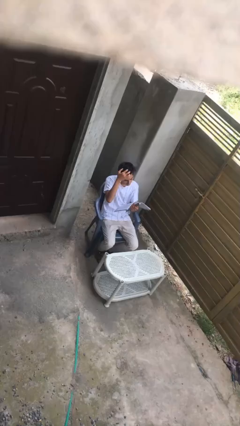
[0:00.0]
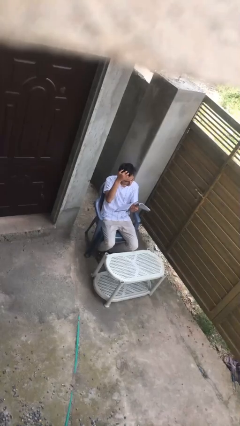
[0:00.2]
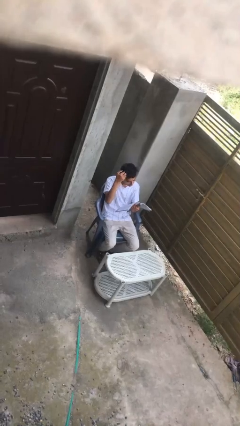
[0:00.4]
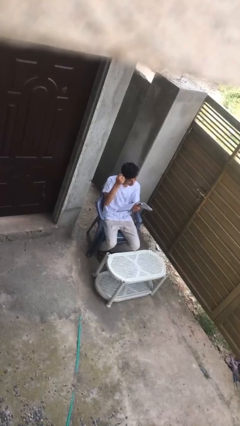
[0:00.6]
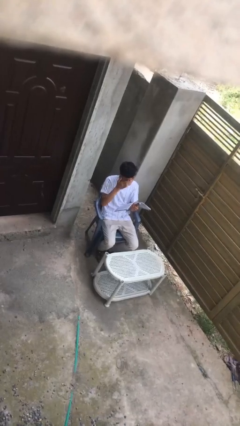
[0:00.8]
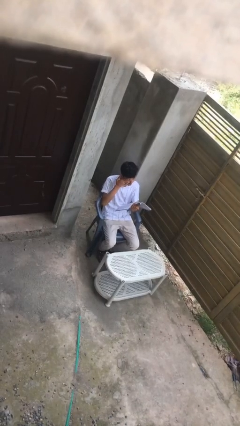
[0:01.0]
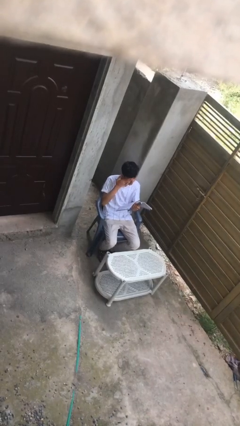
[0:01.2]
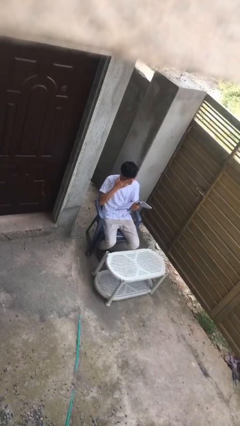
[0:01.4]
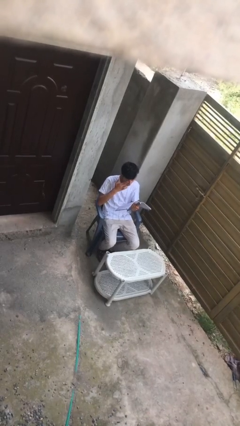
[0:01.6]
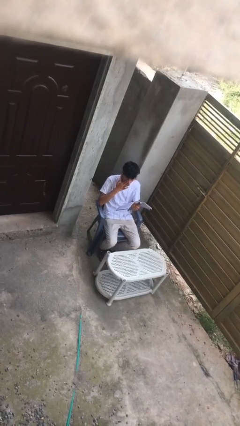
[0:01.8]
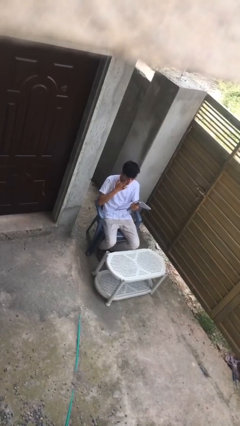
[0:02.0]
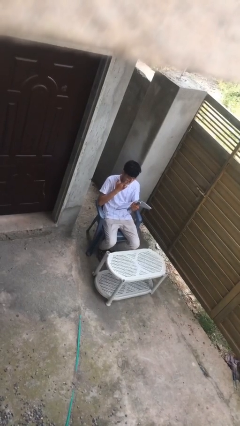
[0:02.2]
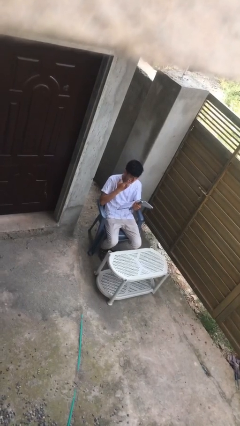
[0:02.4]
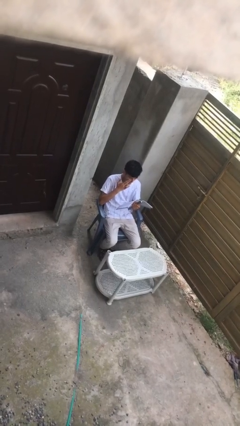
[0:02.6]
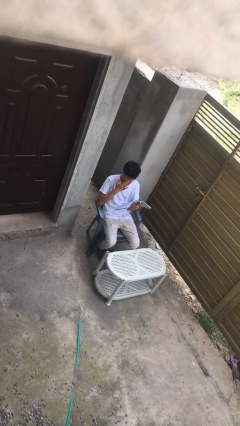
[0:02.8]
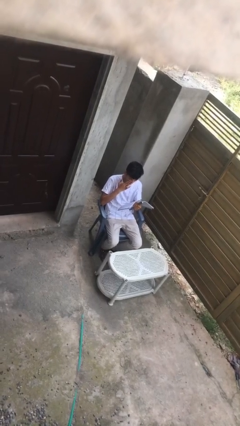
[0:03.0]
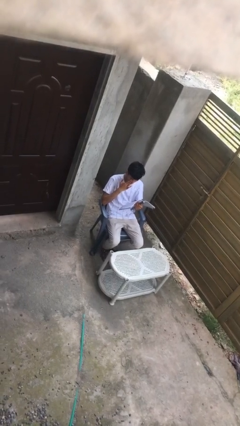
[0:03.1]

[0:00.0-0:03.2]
person reads document

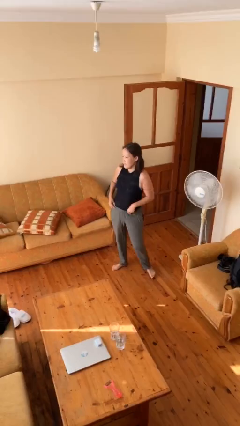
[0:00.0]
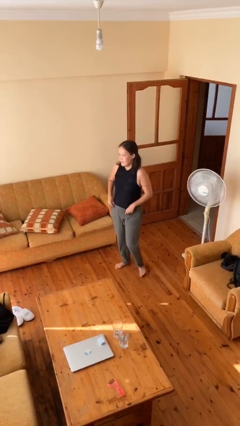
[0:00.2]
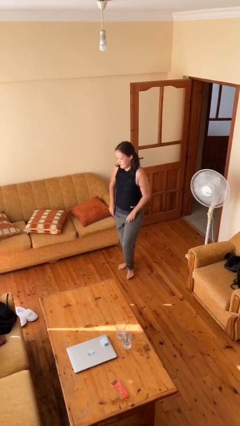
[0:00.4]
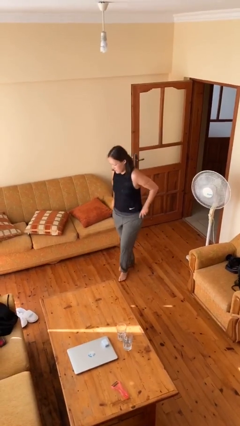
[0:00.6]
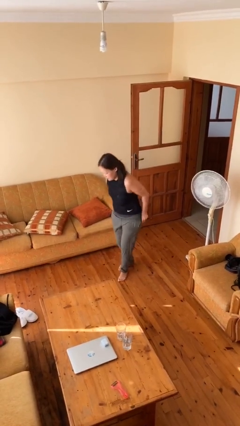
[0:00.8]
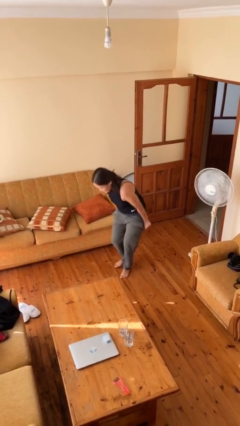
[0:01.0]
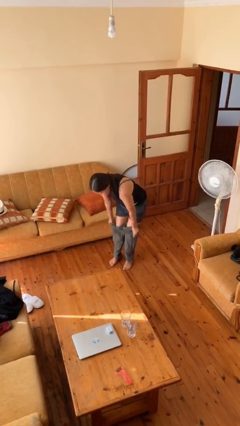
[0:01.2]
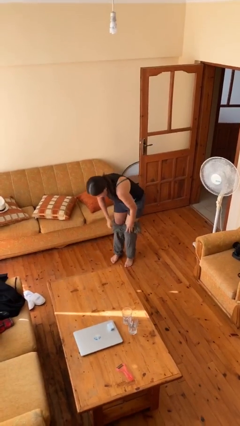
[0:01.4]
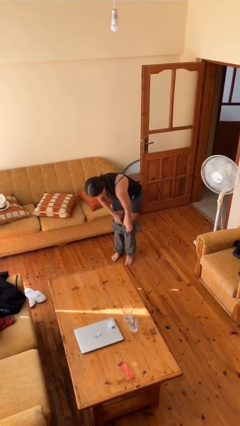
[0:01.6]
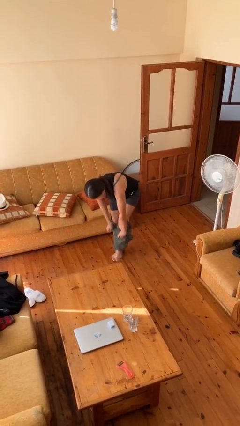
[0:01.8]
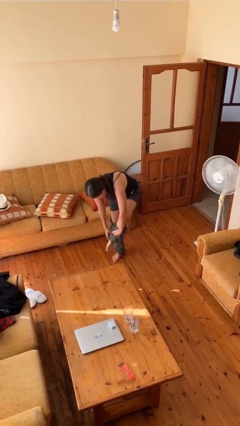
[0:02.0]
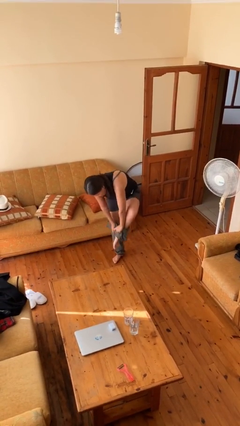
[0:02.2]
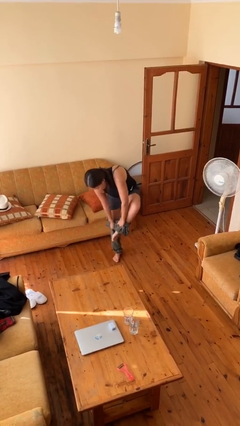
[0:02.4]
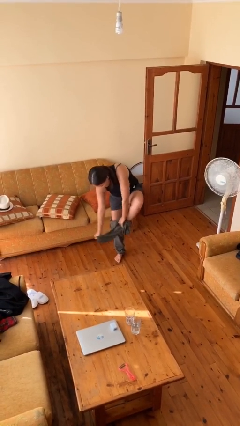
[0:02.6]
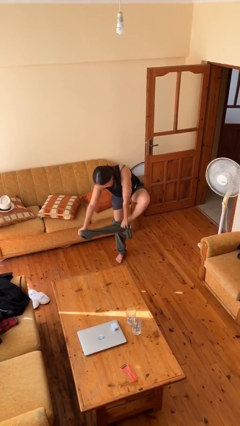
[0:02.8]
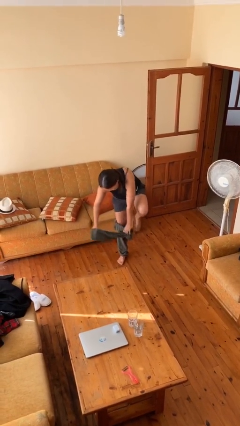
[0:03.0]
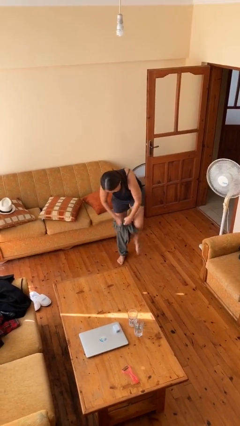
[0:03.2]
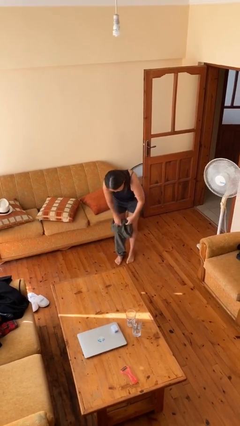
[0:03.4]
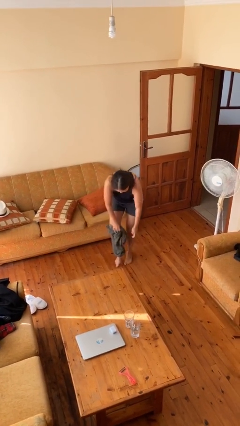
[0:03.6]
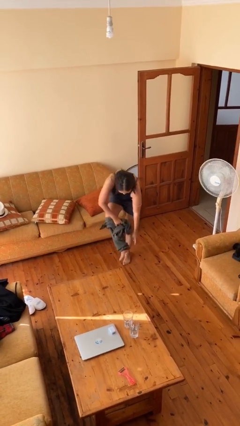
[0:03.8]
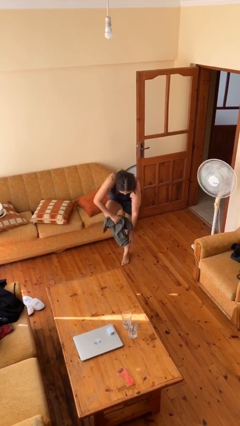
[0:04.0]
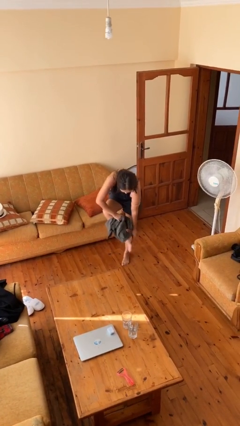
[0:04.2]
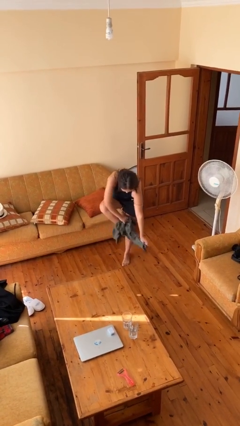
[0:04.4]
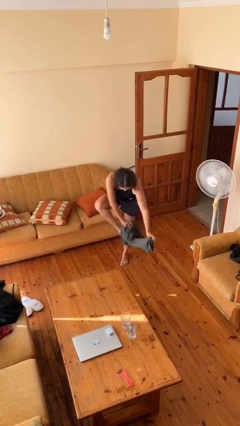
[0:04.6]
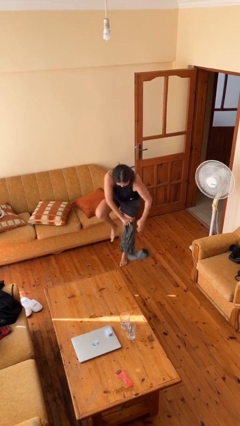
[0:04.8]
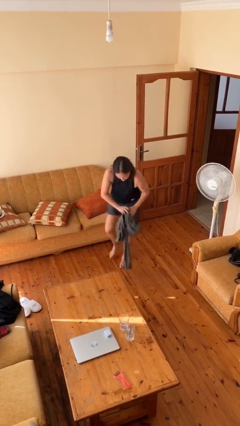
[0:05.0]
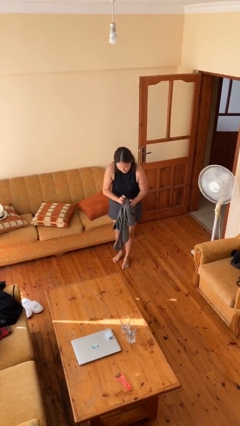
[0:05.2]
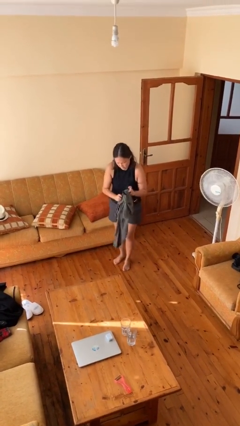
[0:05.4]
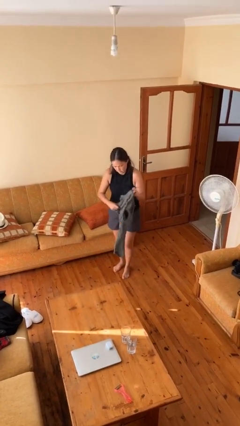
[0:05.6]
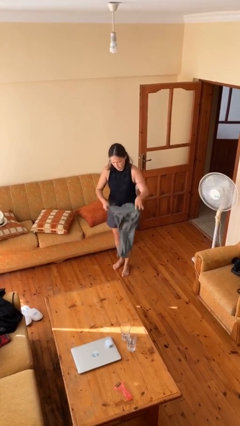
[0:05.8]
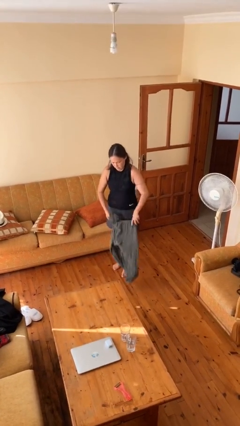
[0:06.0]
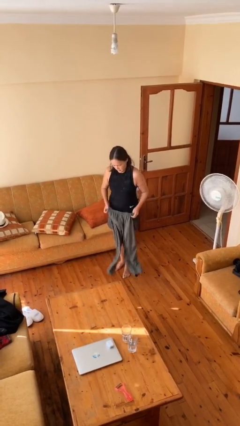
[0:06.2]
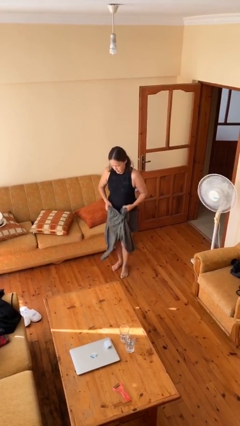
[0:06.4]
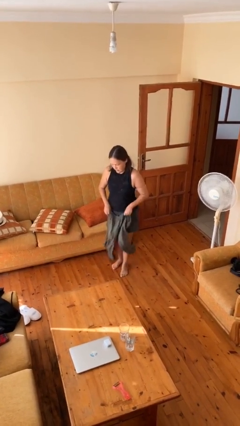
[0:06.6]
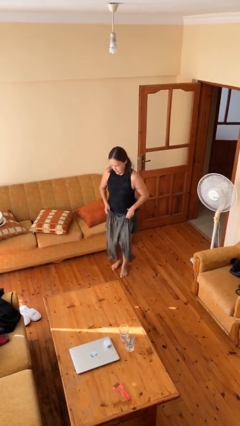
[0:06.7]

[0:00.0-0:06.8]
person takes off pants

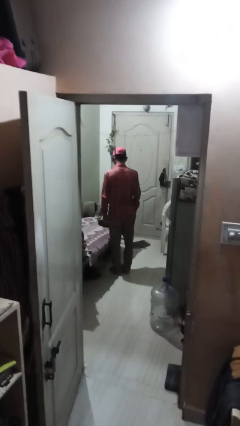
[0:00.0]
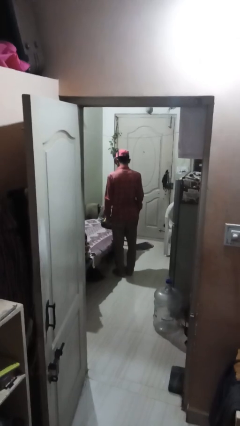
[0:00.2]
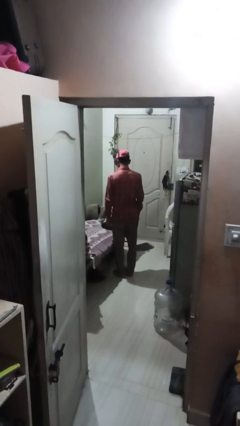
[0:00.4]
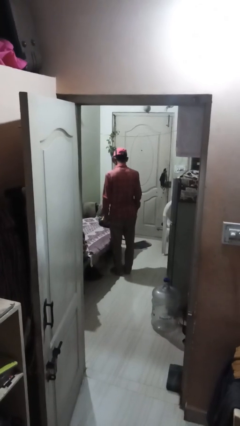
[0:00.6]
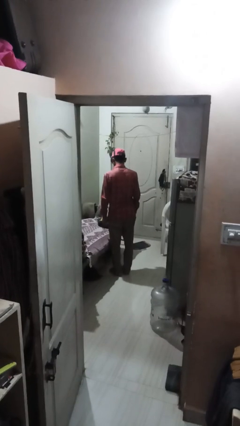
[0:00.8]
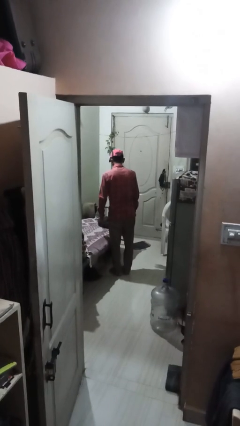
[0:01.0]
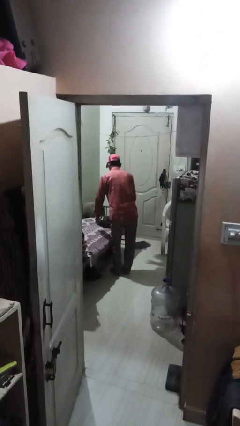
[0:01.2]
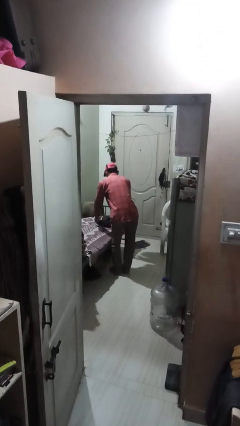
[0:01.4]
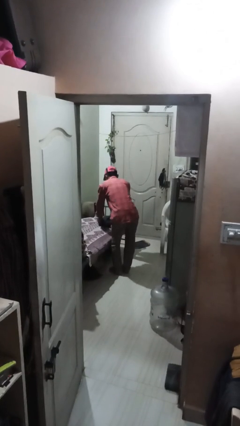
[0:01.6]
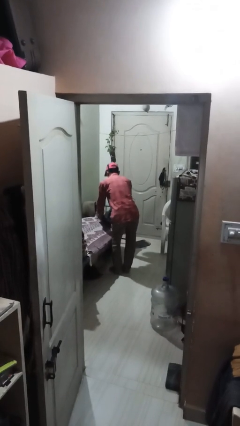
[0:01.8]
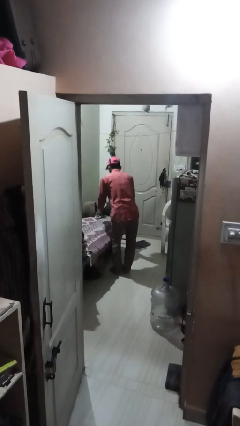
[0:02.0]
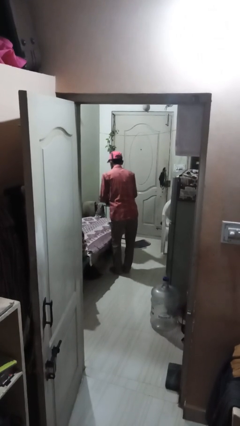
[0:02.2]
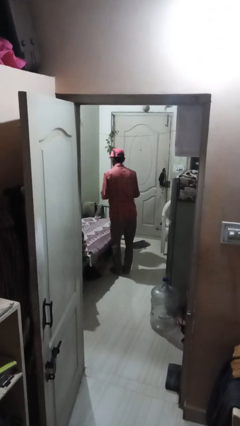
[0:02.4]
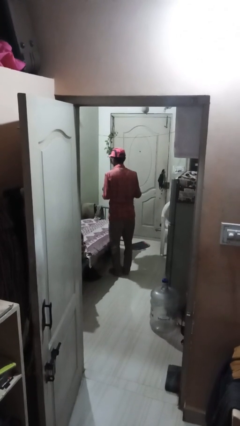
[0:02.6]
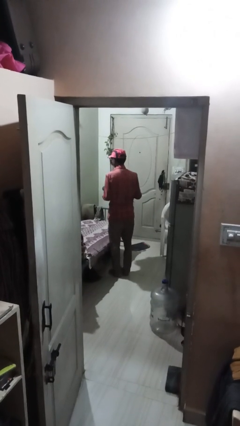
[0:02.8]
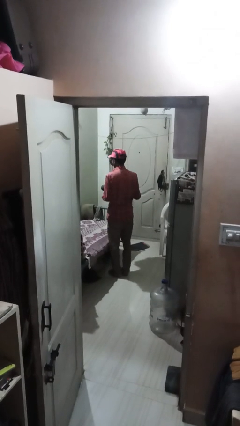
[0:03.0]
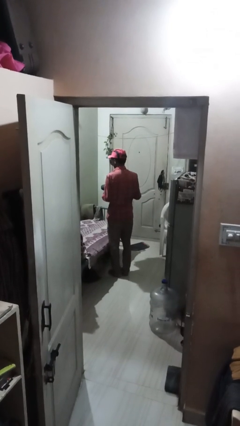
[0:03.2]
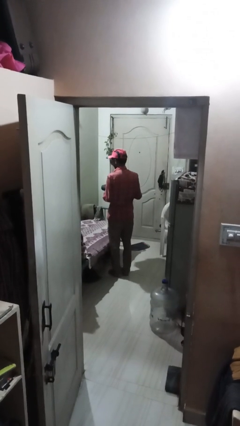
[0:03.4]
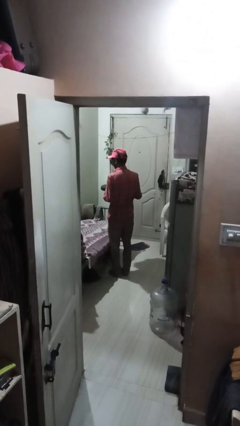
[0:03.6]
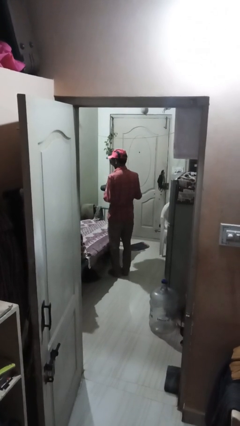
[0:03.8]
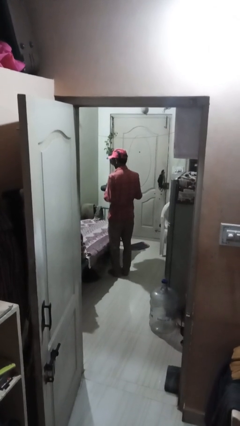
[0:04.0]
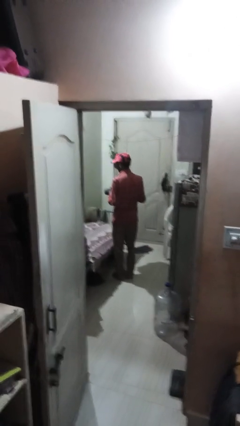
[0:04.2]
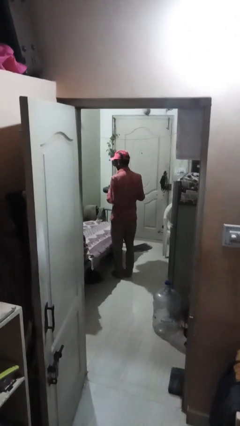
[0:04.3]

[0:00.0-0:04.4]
person picks up object from bed

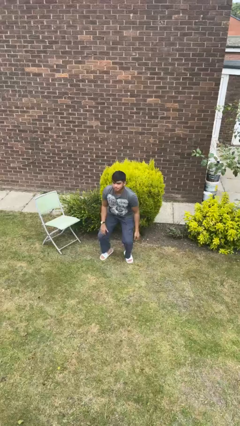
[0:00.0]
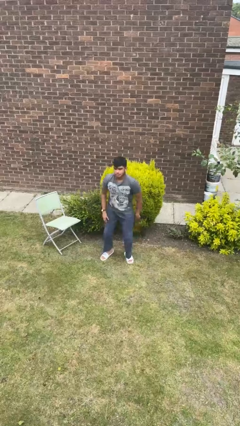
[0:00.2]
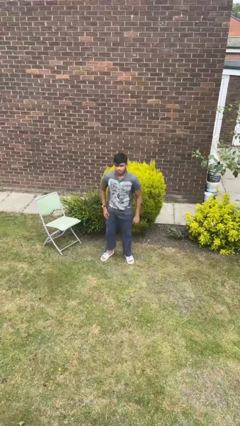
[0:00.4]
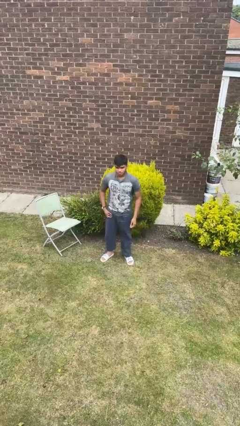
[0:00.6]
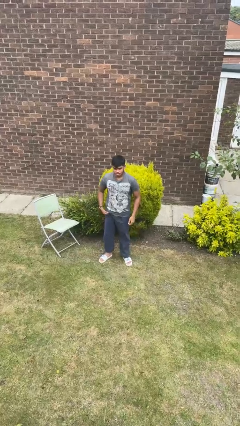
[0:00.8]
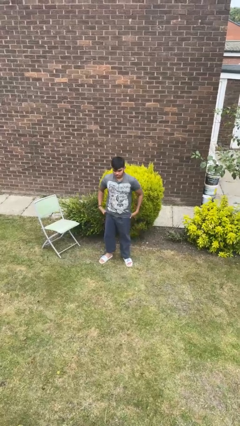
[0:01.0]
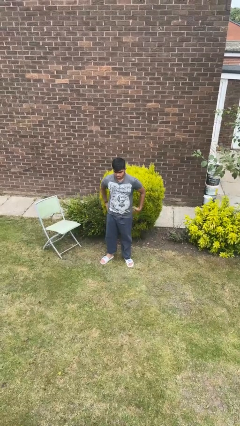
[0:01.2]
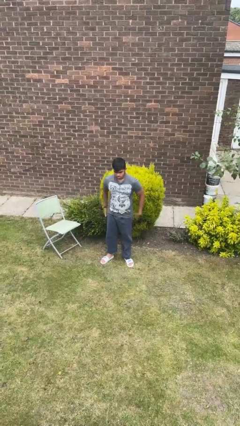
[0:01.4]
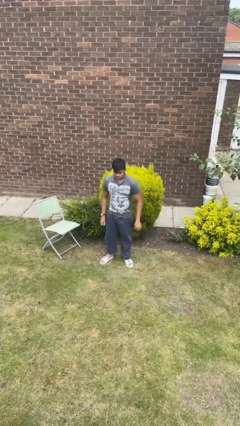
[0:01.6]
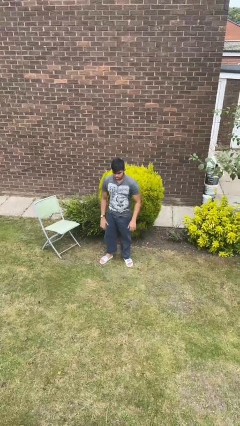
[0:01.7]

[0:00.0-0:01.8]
person stands up

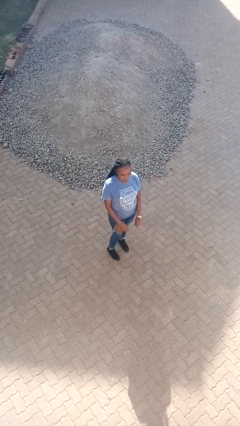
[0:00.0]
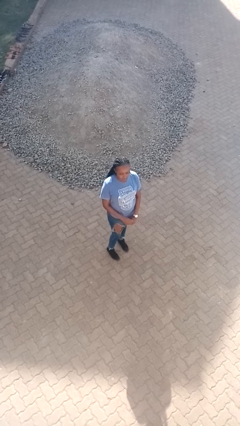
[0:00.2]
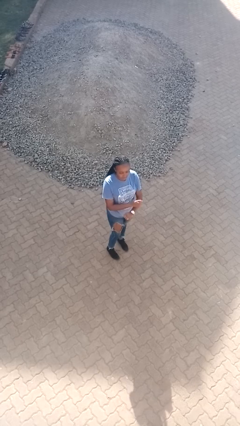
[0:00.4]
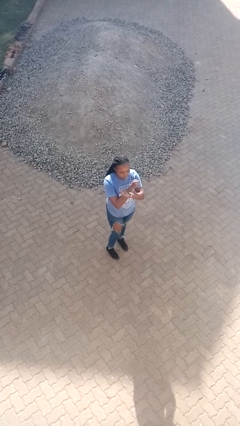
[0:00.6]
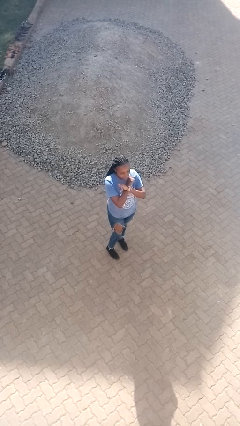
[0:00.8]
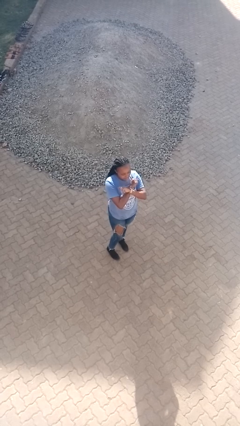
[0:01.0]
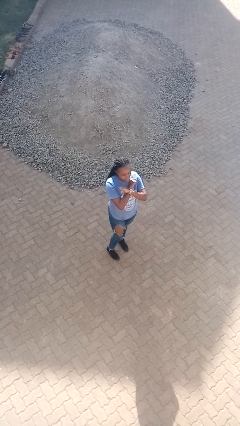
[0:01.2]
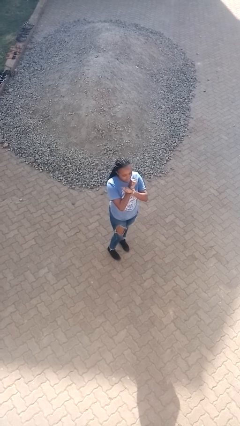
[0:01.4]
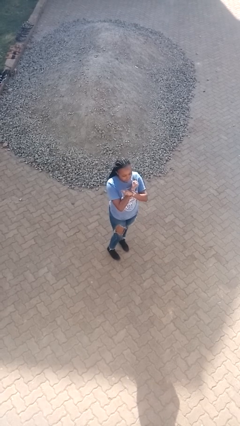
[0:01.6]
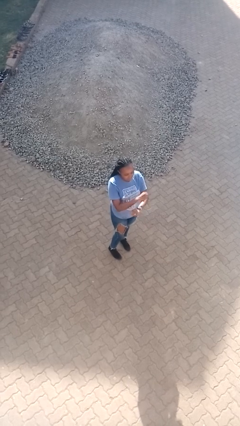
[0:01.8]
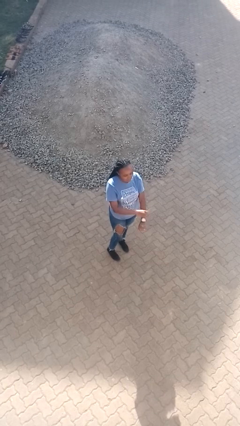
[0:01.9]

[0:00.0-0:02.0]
person gestures arms x
